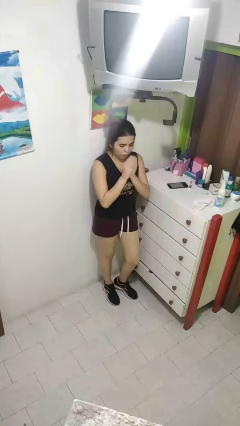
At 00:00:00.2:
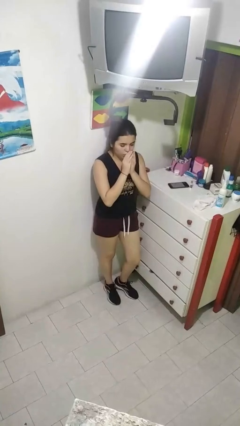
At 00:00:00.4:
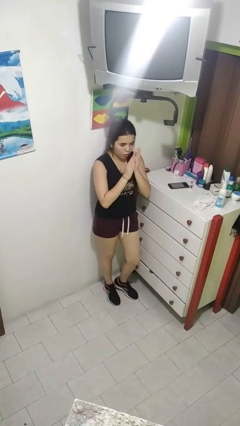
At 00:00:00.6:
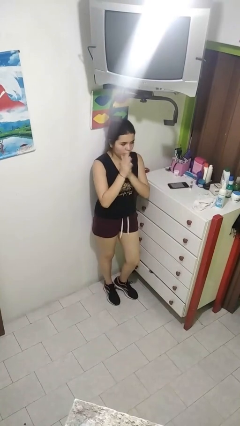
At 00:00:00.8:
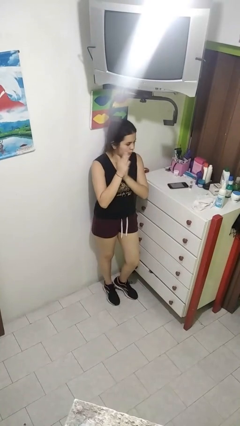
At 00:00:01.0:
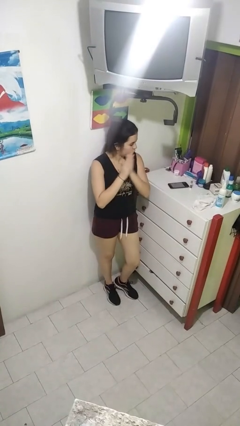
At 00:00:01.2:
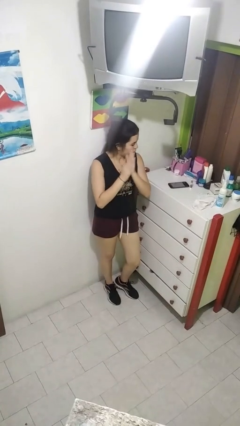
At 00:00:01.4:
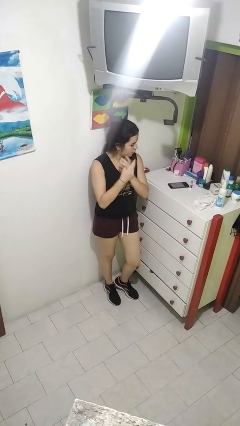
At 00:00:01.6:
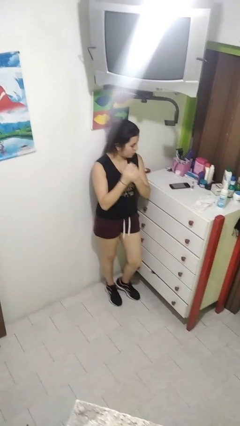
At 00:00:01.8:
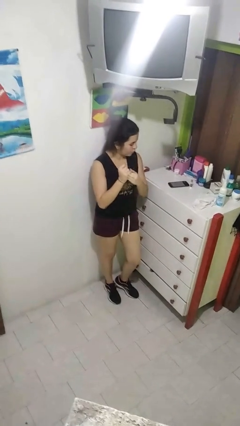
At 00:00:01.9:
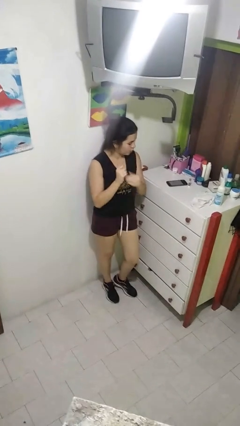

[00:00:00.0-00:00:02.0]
person blows into hands

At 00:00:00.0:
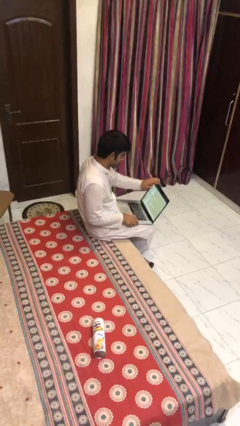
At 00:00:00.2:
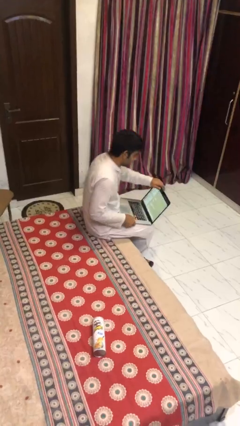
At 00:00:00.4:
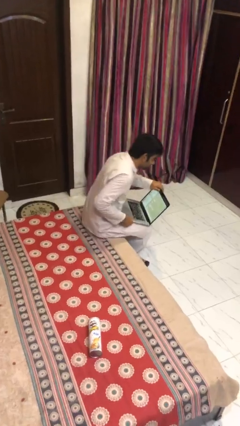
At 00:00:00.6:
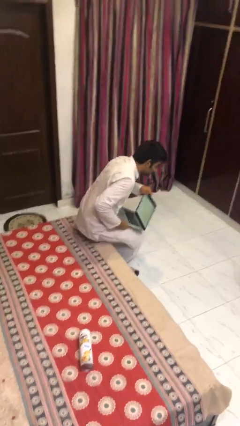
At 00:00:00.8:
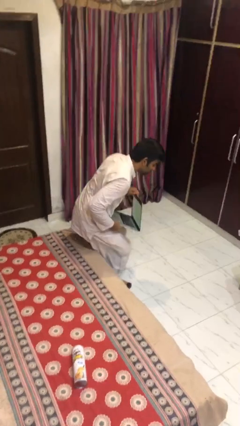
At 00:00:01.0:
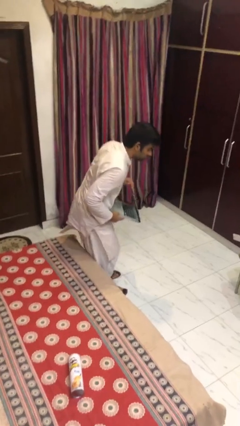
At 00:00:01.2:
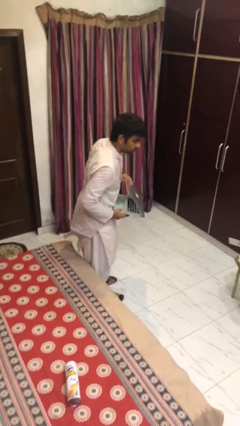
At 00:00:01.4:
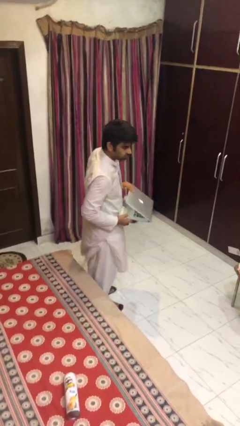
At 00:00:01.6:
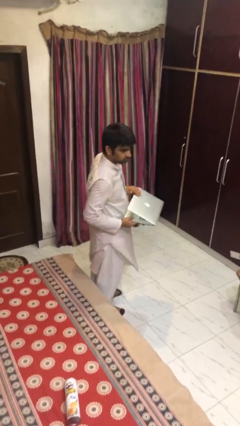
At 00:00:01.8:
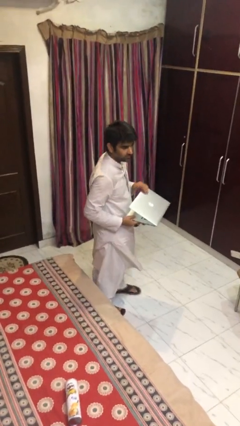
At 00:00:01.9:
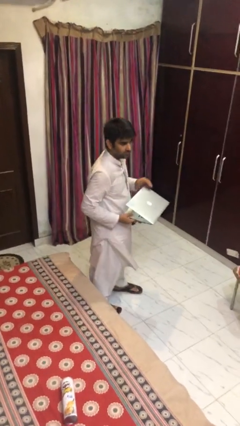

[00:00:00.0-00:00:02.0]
person stands up

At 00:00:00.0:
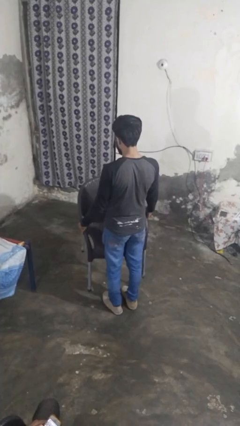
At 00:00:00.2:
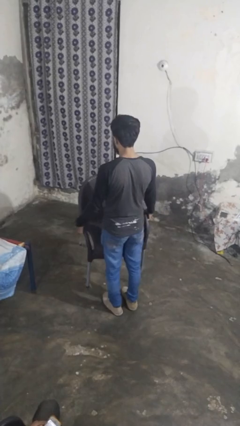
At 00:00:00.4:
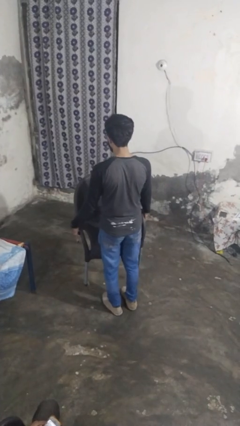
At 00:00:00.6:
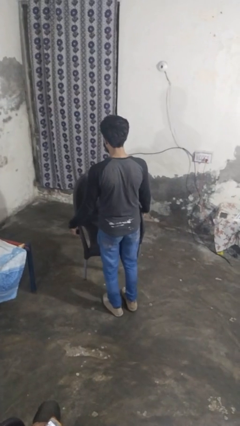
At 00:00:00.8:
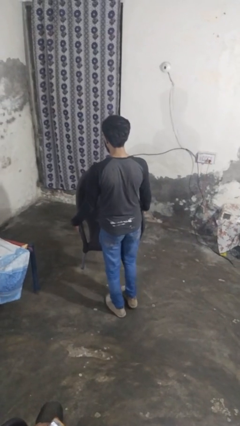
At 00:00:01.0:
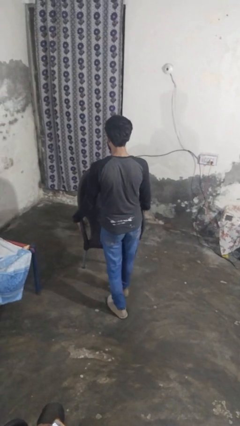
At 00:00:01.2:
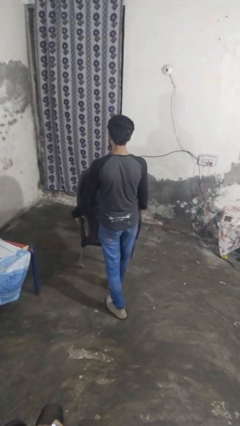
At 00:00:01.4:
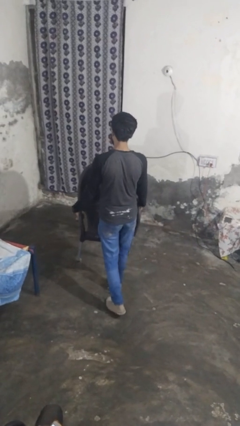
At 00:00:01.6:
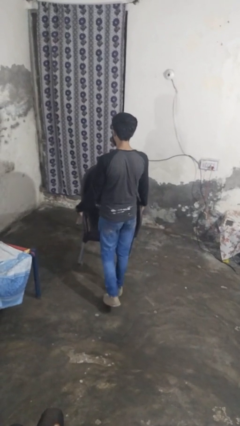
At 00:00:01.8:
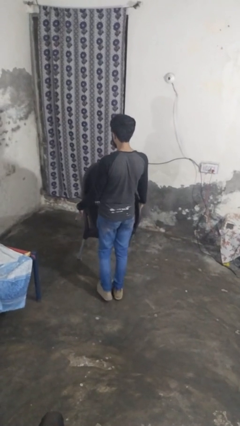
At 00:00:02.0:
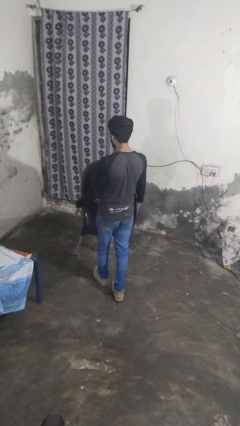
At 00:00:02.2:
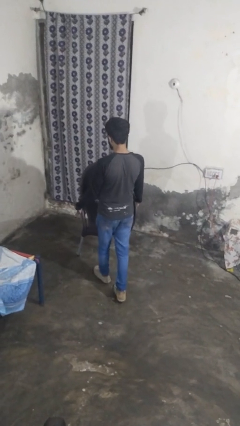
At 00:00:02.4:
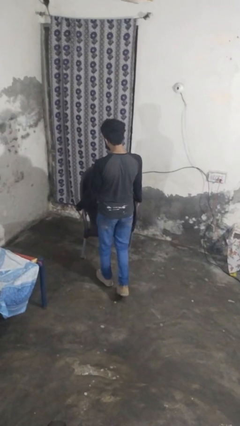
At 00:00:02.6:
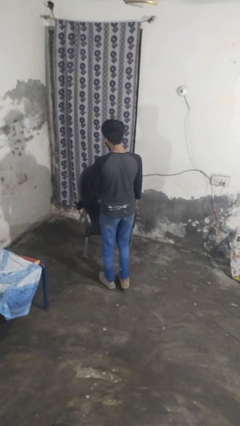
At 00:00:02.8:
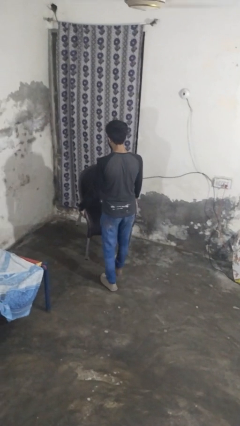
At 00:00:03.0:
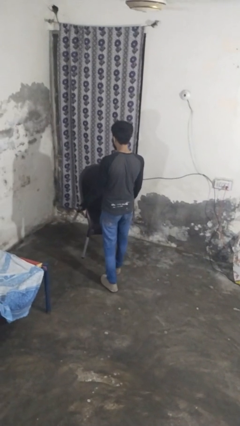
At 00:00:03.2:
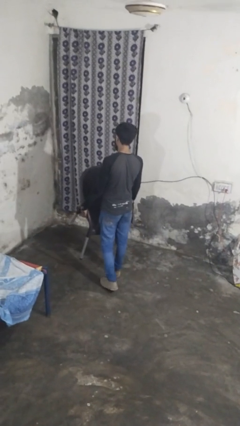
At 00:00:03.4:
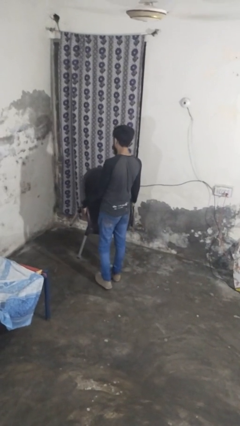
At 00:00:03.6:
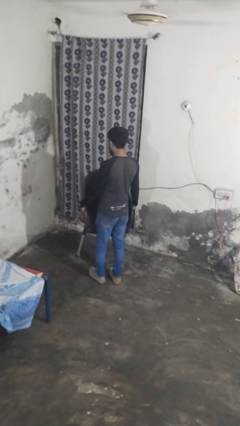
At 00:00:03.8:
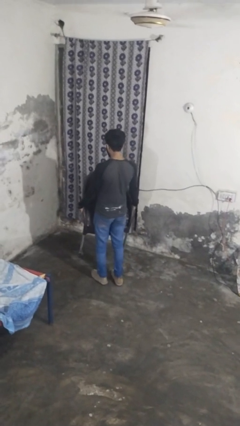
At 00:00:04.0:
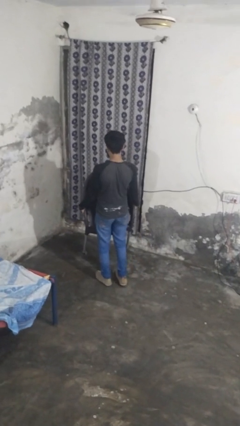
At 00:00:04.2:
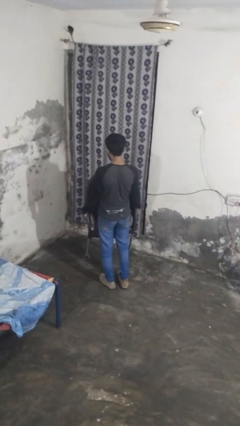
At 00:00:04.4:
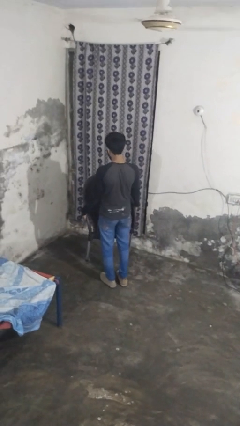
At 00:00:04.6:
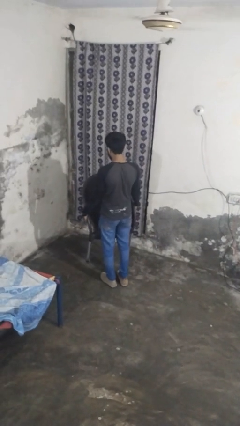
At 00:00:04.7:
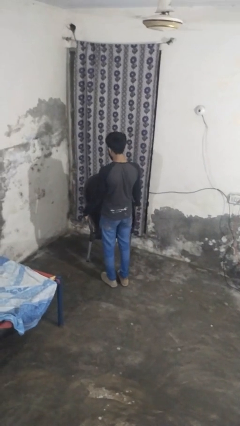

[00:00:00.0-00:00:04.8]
person carries furniture

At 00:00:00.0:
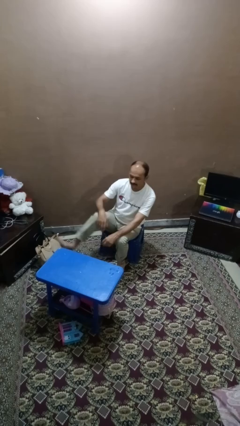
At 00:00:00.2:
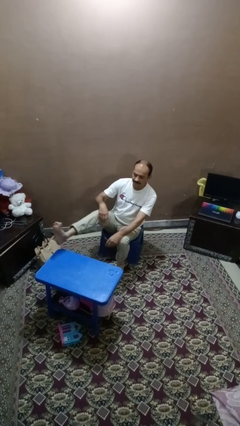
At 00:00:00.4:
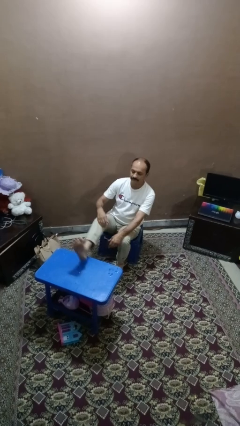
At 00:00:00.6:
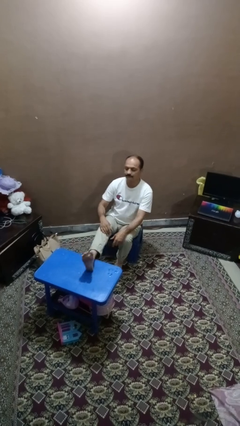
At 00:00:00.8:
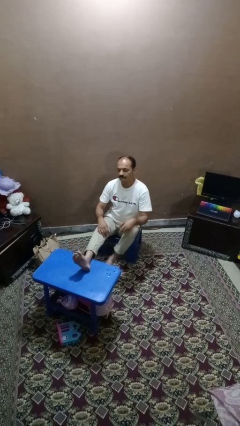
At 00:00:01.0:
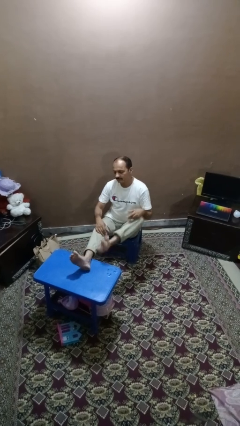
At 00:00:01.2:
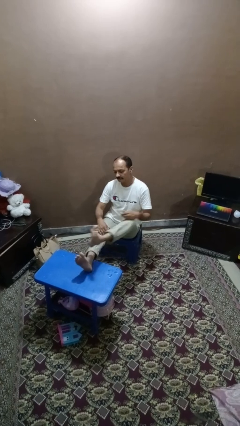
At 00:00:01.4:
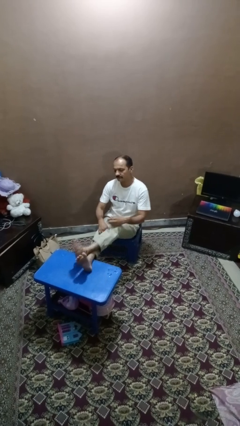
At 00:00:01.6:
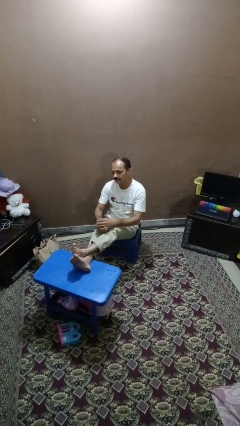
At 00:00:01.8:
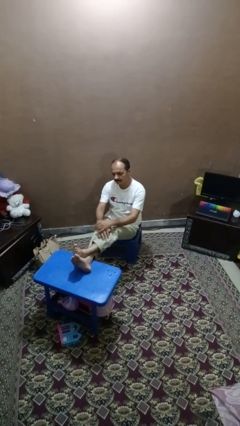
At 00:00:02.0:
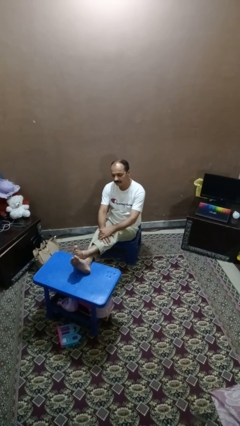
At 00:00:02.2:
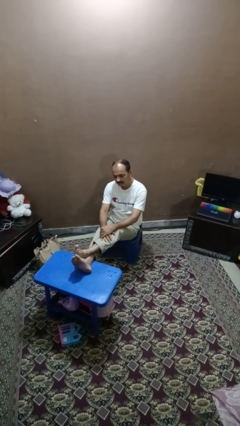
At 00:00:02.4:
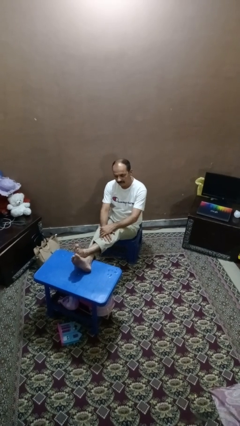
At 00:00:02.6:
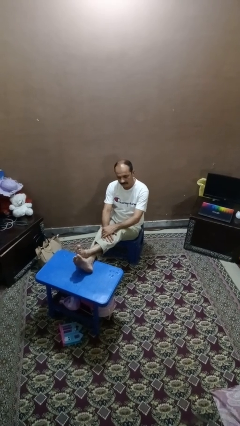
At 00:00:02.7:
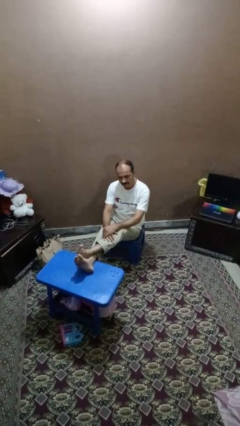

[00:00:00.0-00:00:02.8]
person puts feet up

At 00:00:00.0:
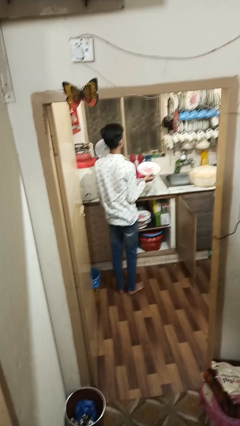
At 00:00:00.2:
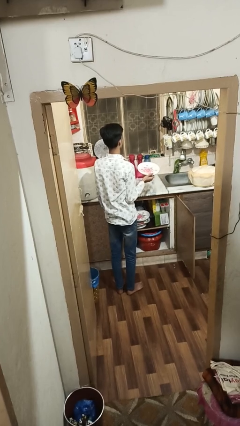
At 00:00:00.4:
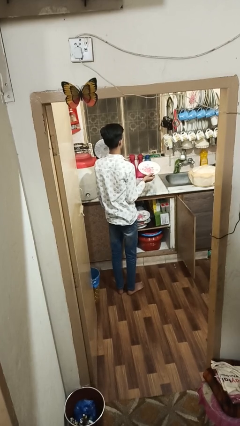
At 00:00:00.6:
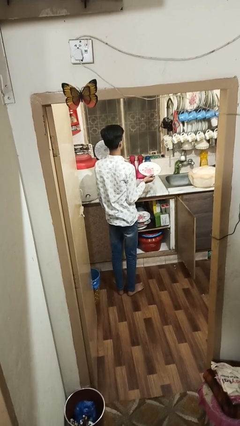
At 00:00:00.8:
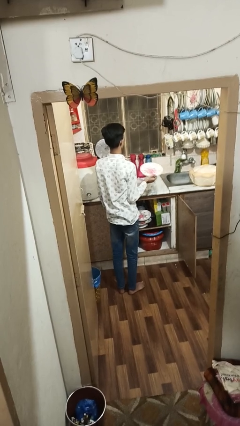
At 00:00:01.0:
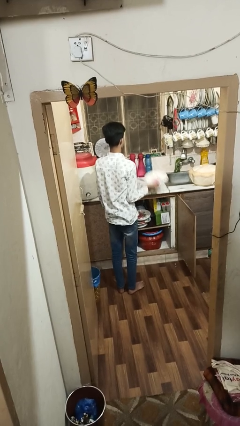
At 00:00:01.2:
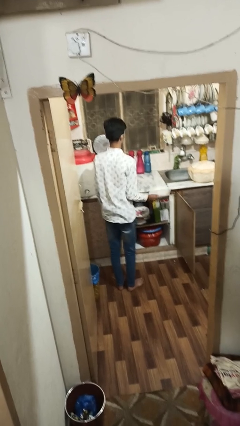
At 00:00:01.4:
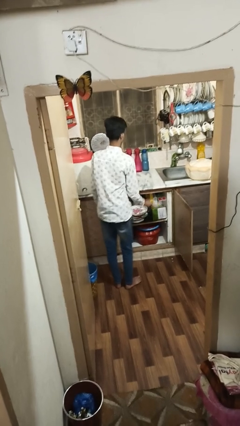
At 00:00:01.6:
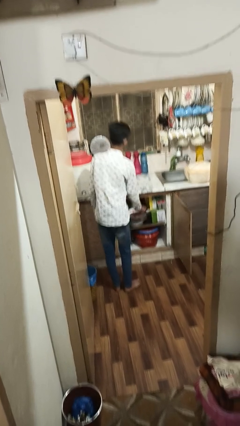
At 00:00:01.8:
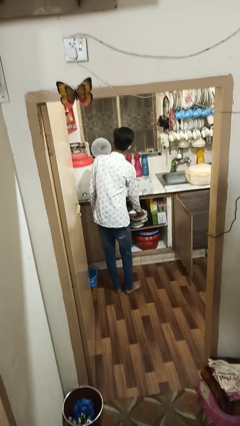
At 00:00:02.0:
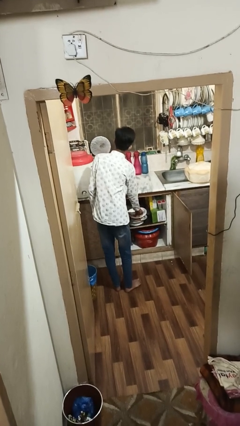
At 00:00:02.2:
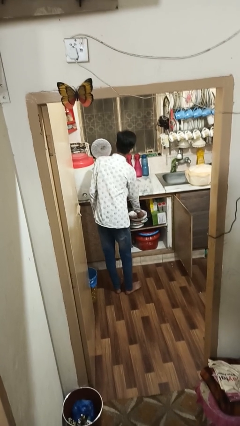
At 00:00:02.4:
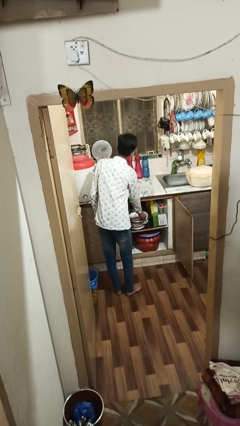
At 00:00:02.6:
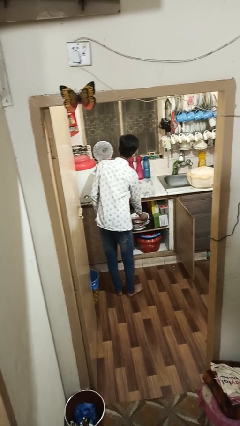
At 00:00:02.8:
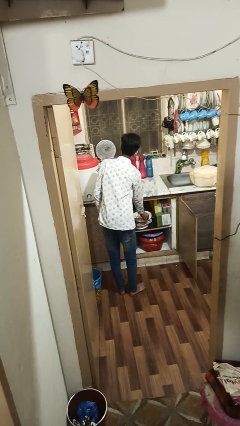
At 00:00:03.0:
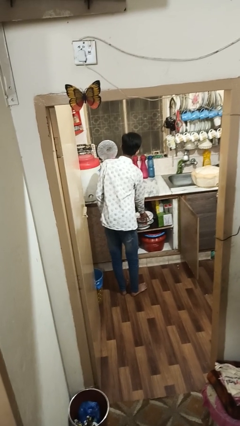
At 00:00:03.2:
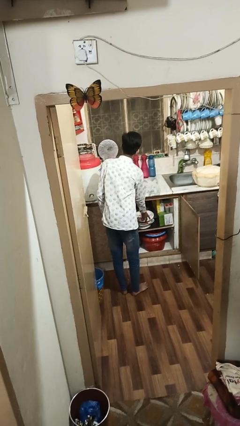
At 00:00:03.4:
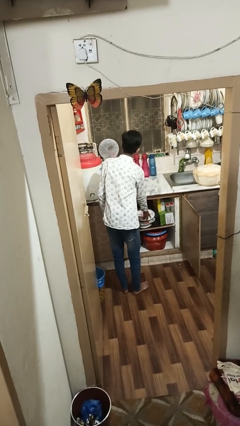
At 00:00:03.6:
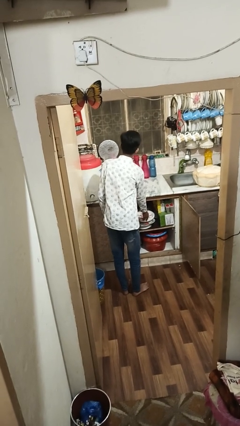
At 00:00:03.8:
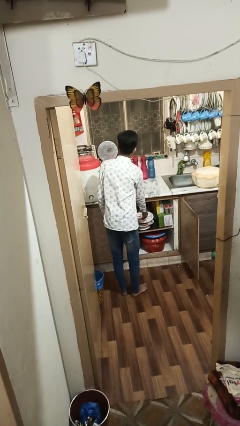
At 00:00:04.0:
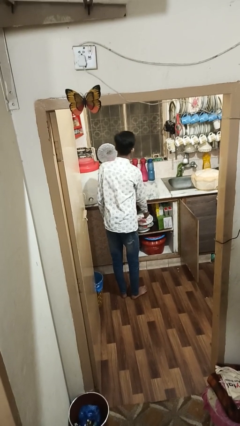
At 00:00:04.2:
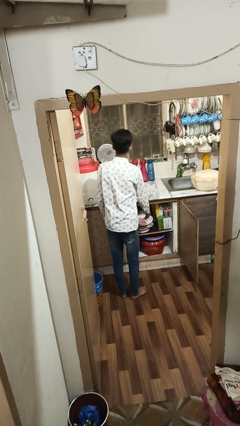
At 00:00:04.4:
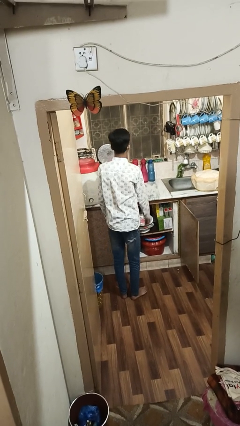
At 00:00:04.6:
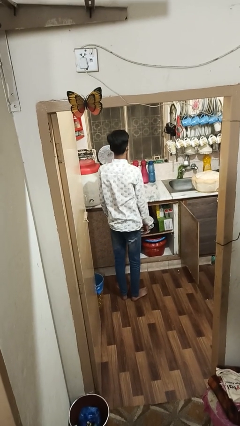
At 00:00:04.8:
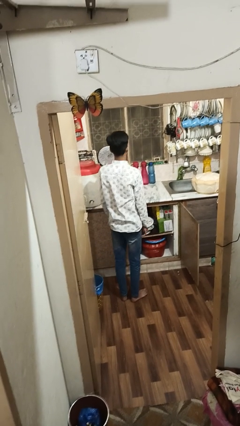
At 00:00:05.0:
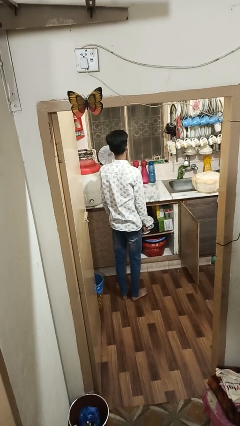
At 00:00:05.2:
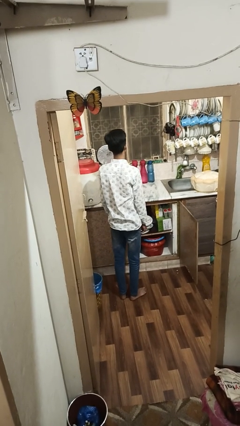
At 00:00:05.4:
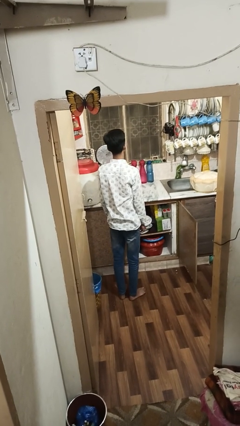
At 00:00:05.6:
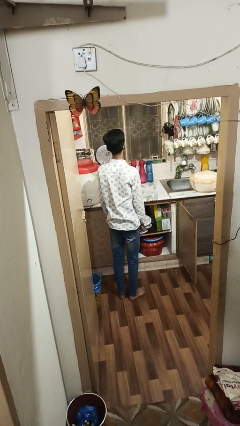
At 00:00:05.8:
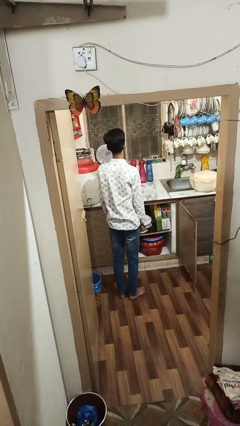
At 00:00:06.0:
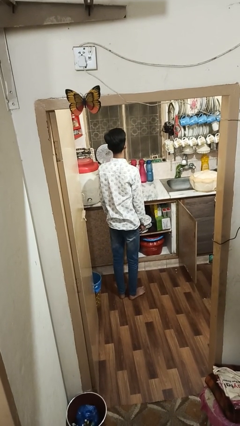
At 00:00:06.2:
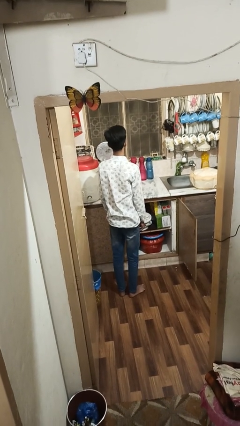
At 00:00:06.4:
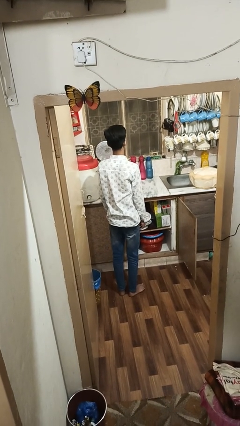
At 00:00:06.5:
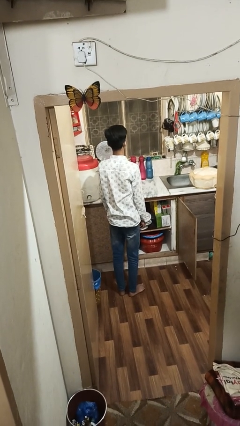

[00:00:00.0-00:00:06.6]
person puts object in cabinet
